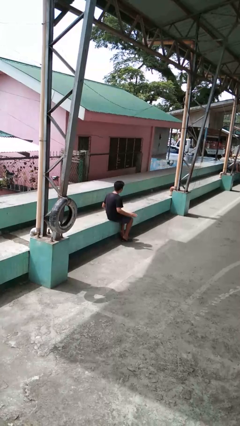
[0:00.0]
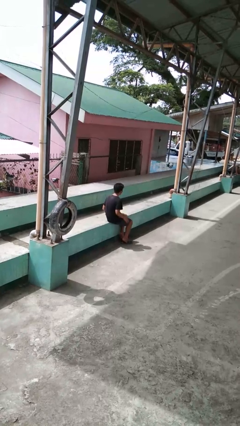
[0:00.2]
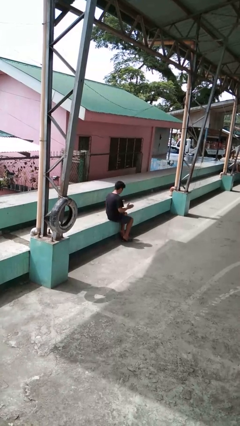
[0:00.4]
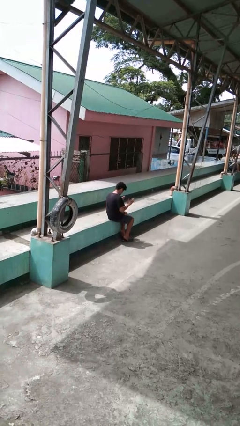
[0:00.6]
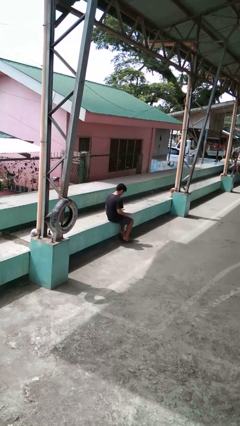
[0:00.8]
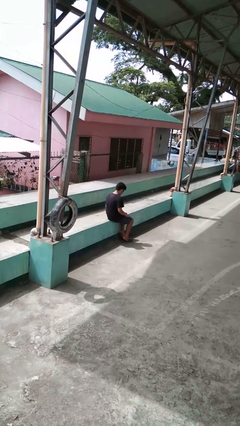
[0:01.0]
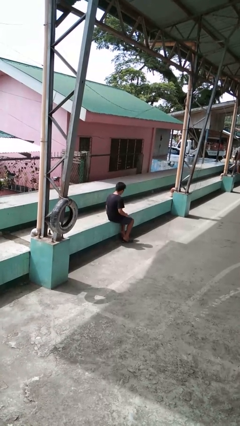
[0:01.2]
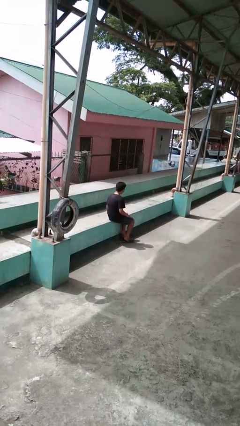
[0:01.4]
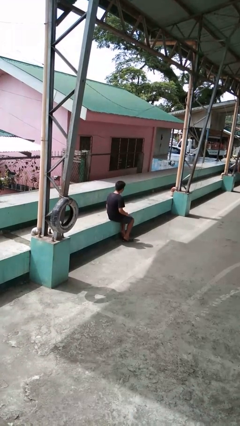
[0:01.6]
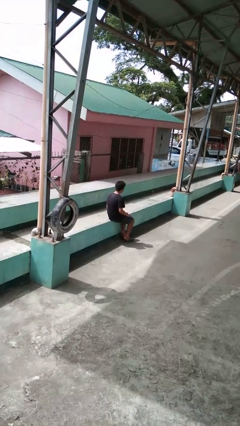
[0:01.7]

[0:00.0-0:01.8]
person slaps hands on thighs

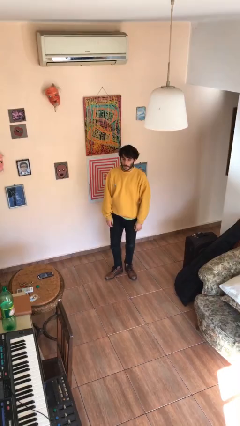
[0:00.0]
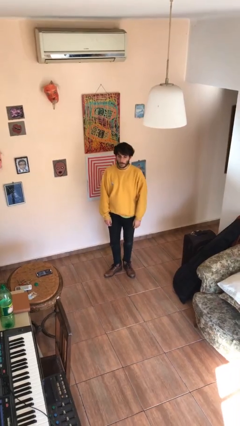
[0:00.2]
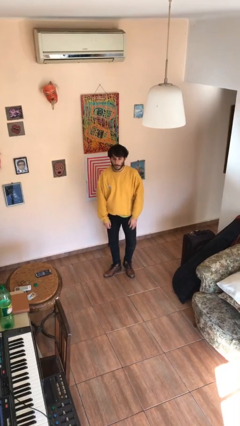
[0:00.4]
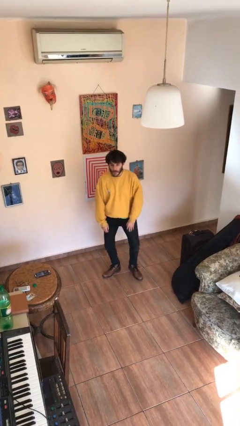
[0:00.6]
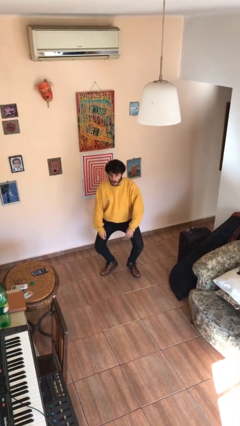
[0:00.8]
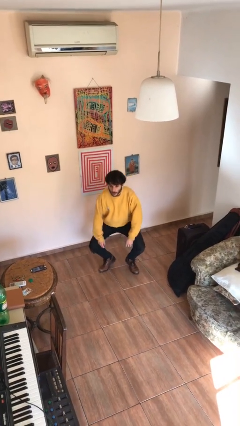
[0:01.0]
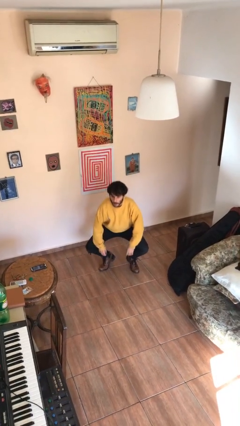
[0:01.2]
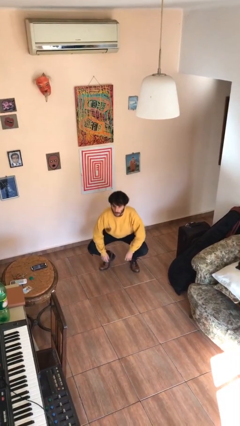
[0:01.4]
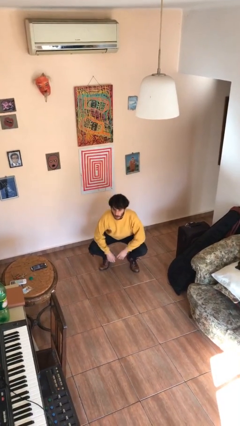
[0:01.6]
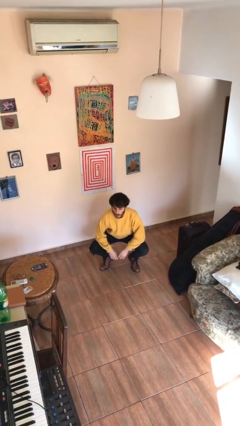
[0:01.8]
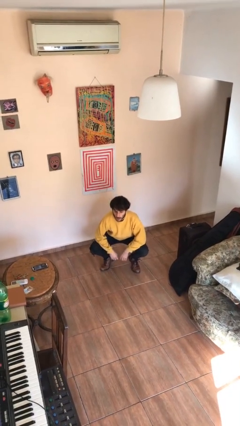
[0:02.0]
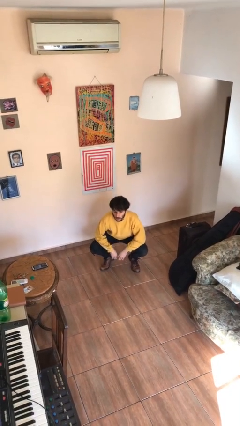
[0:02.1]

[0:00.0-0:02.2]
person squats

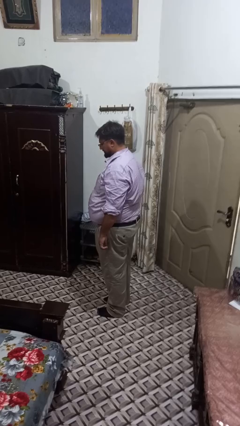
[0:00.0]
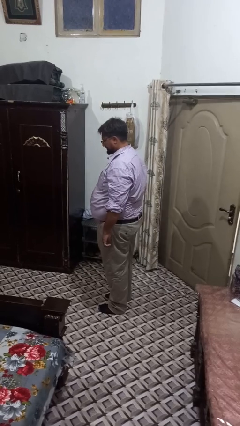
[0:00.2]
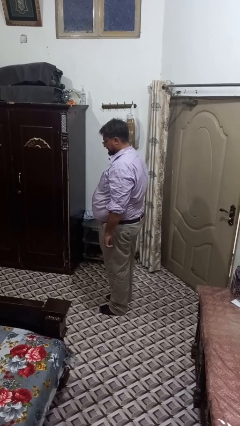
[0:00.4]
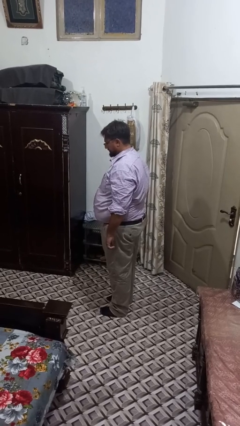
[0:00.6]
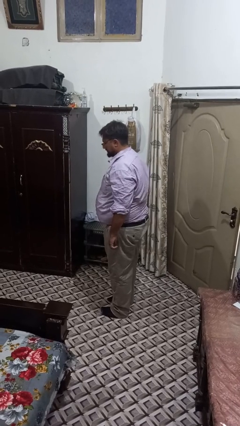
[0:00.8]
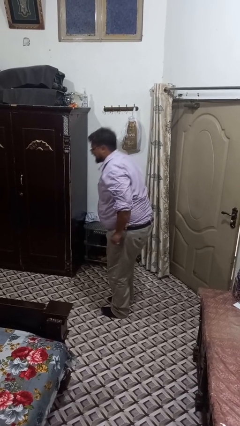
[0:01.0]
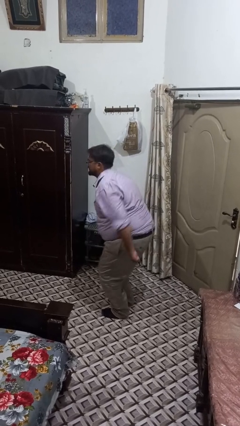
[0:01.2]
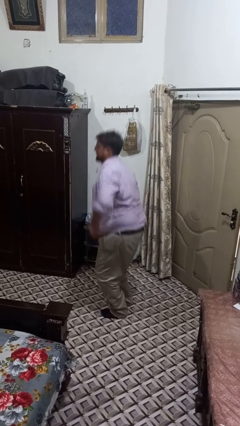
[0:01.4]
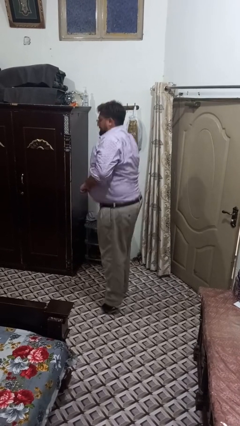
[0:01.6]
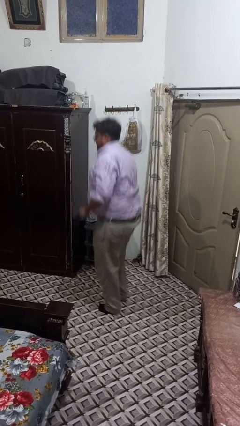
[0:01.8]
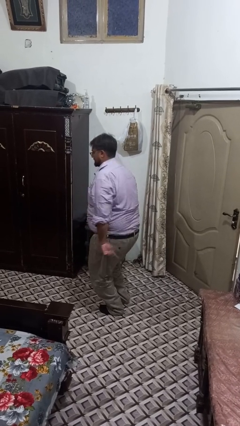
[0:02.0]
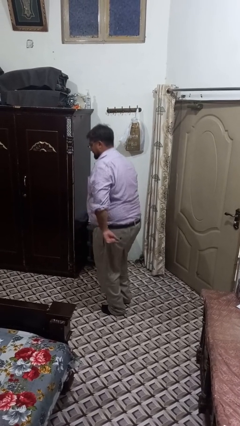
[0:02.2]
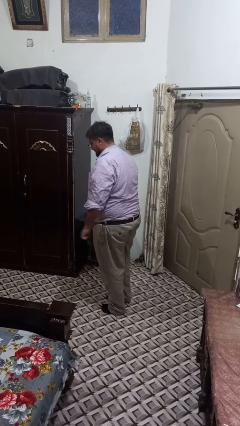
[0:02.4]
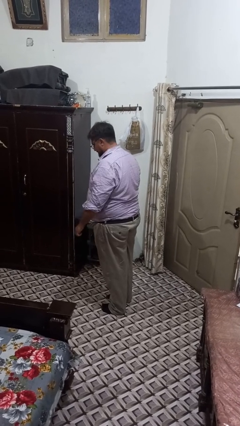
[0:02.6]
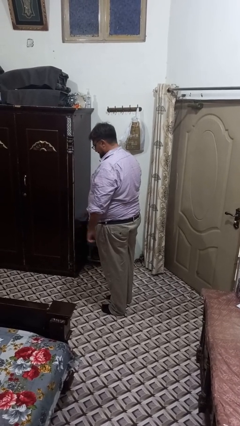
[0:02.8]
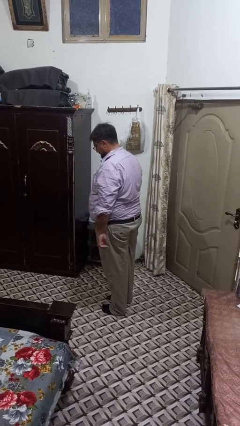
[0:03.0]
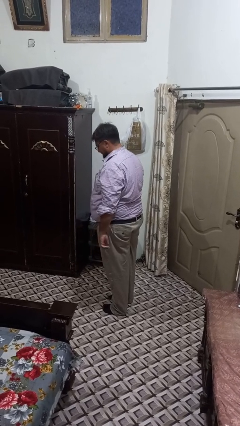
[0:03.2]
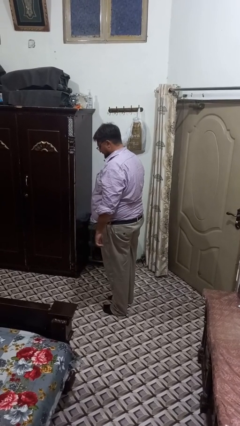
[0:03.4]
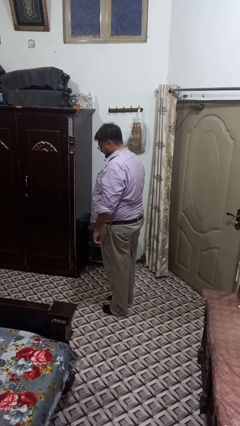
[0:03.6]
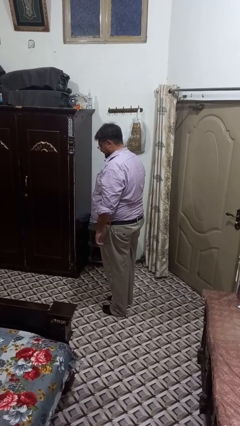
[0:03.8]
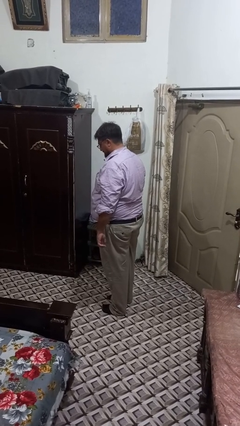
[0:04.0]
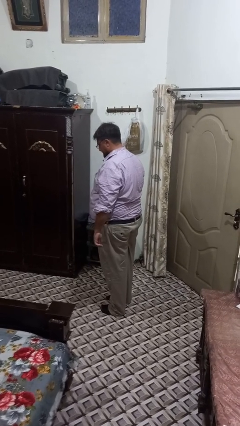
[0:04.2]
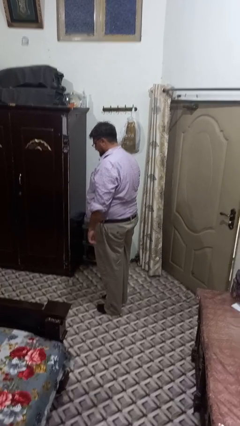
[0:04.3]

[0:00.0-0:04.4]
person jumps

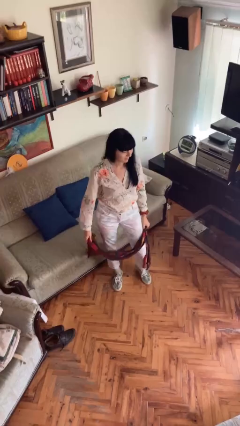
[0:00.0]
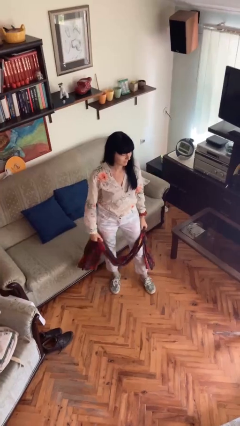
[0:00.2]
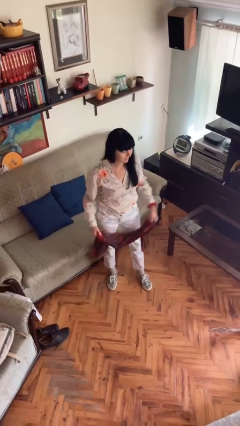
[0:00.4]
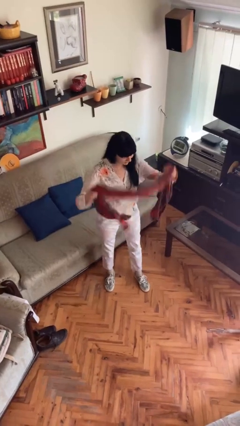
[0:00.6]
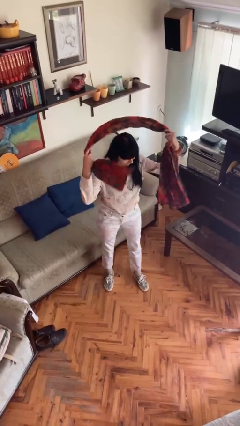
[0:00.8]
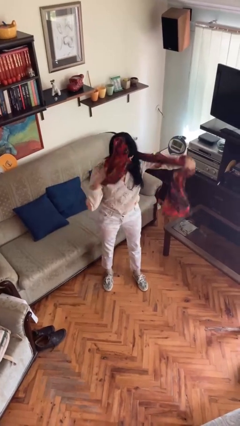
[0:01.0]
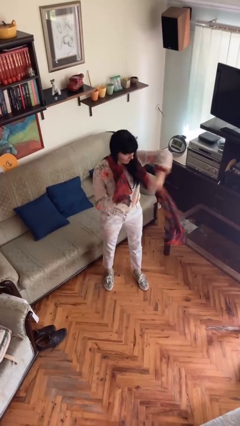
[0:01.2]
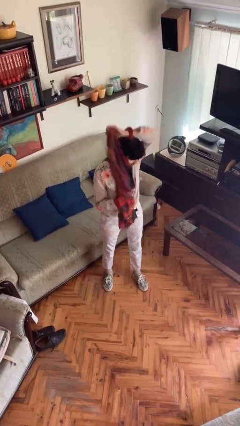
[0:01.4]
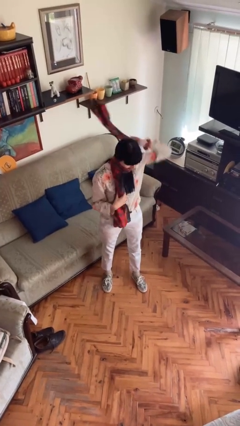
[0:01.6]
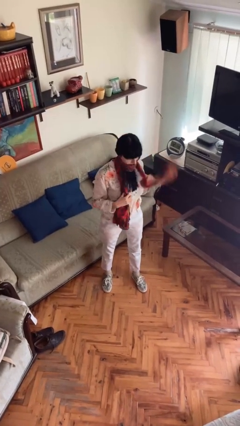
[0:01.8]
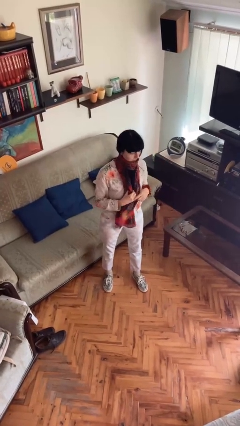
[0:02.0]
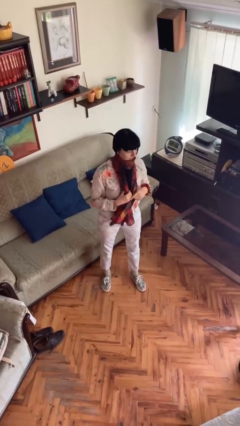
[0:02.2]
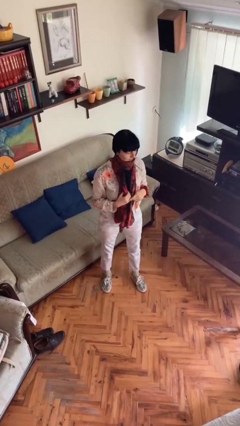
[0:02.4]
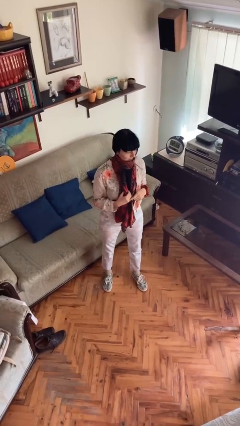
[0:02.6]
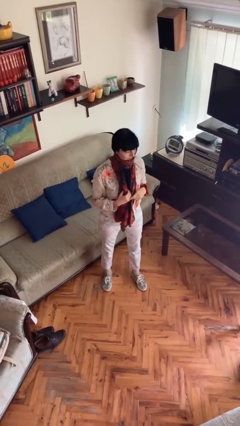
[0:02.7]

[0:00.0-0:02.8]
person puts on scarf

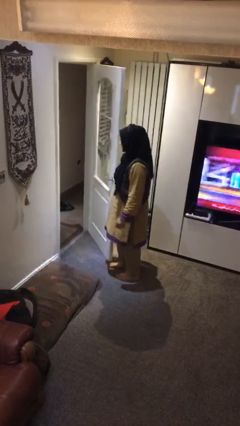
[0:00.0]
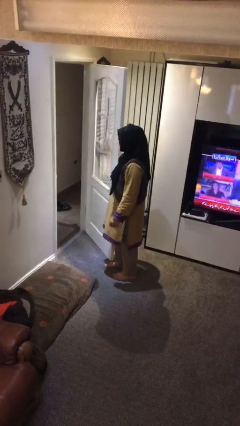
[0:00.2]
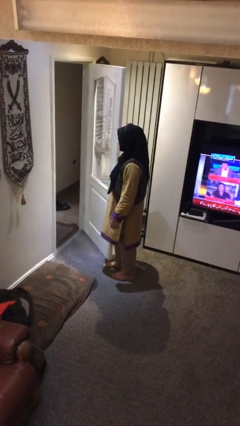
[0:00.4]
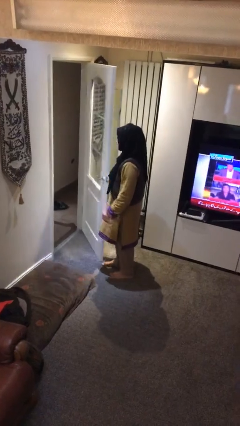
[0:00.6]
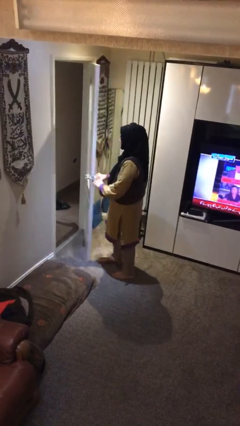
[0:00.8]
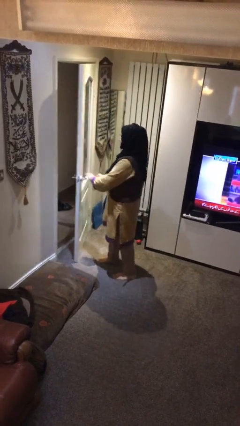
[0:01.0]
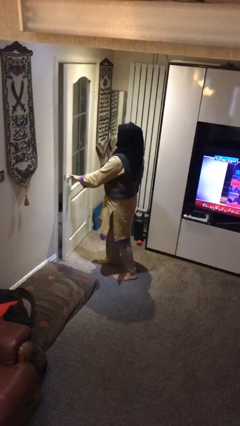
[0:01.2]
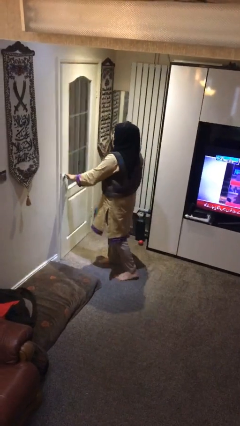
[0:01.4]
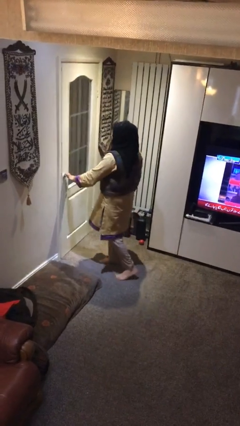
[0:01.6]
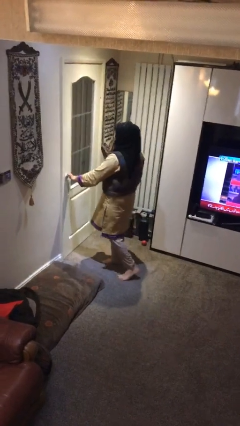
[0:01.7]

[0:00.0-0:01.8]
person closes facility door

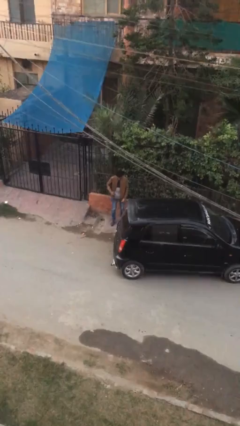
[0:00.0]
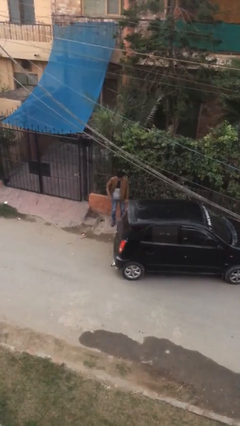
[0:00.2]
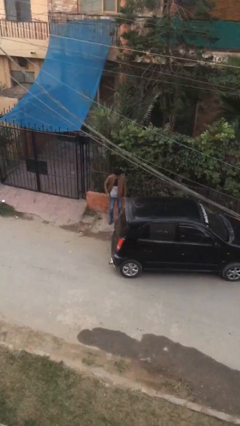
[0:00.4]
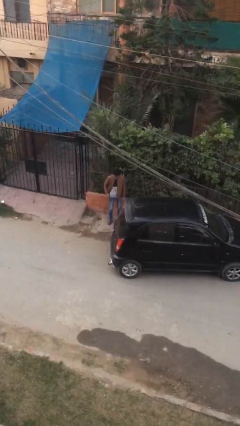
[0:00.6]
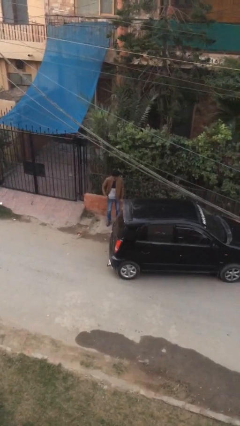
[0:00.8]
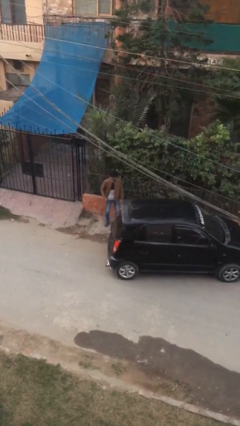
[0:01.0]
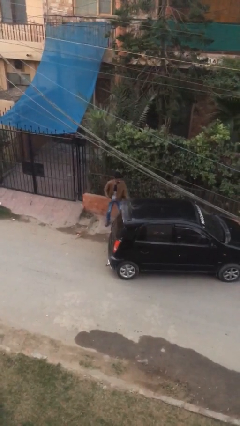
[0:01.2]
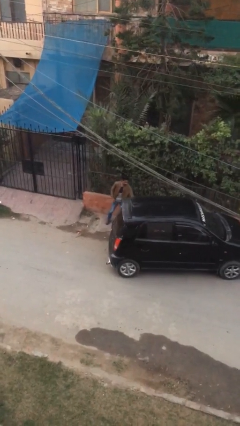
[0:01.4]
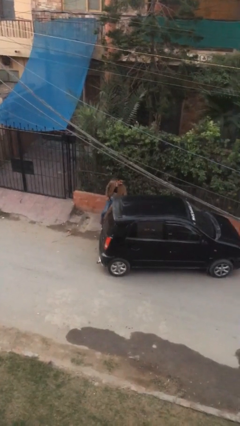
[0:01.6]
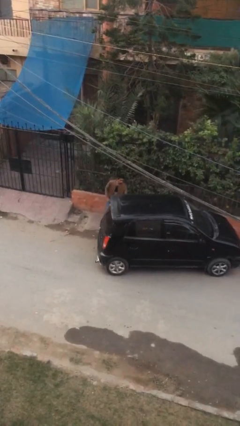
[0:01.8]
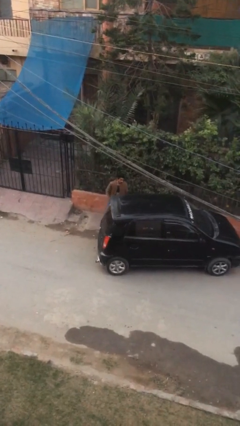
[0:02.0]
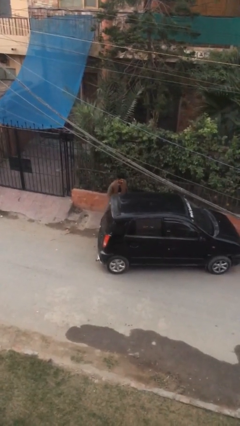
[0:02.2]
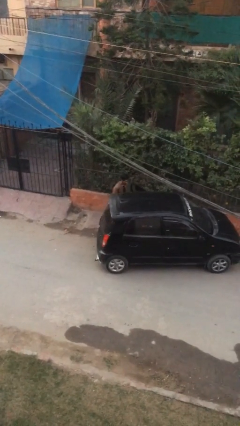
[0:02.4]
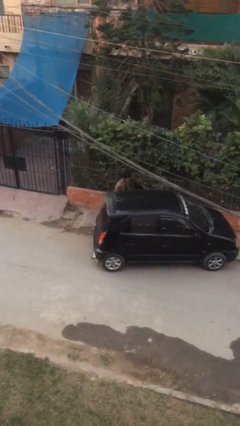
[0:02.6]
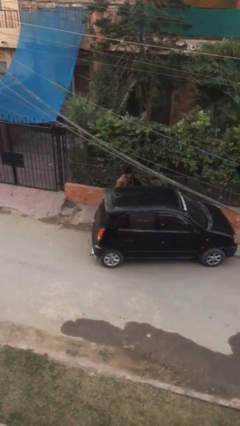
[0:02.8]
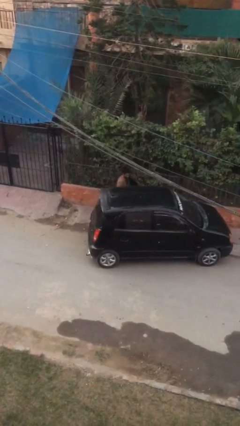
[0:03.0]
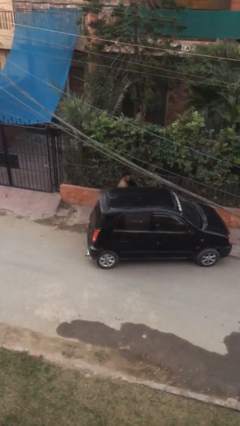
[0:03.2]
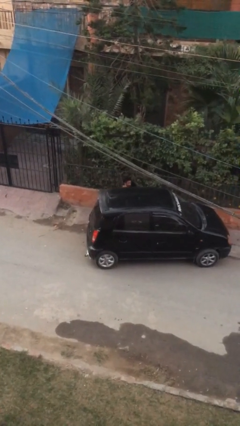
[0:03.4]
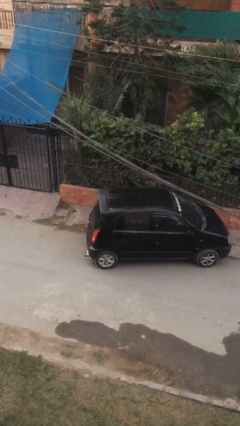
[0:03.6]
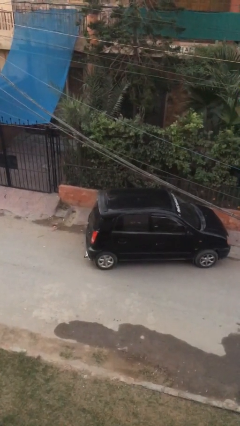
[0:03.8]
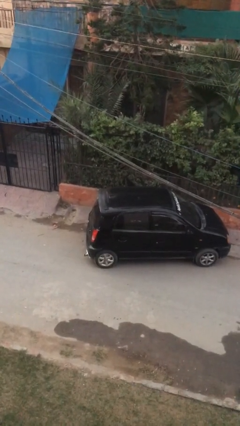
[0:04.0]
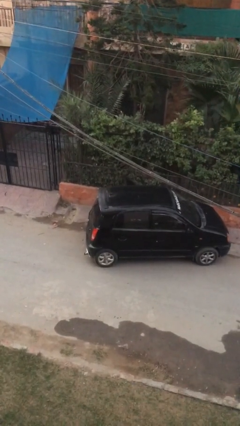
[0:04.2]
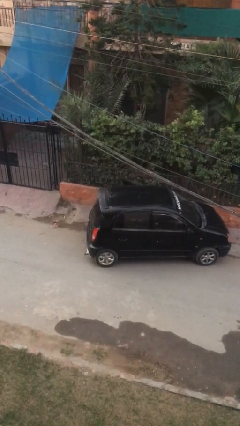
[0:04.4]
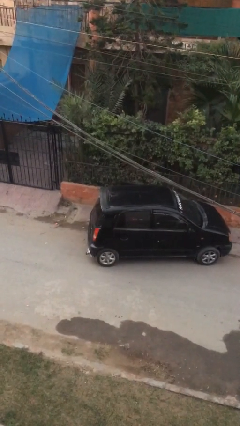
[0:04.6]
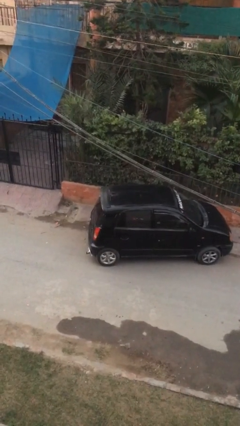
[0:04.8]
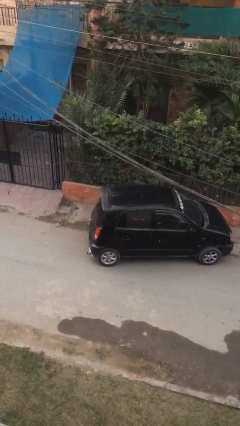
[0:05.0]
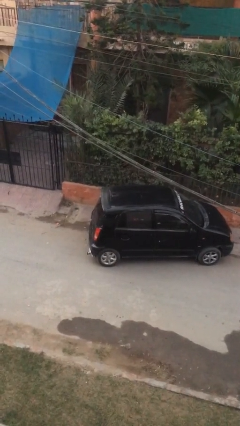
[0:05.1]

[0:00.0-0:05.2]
person enters car
